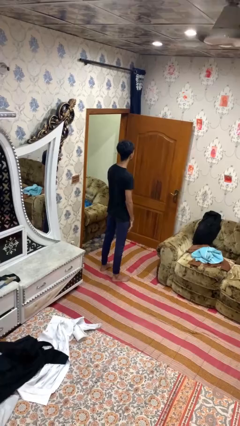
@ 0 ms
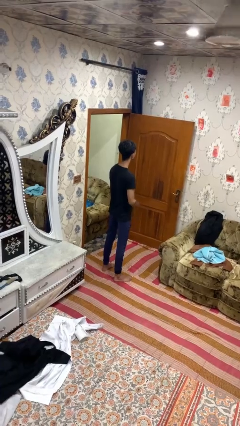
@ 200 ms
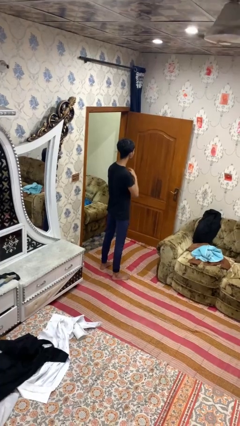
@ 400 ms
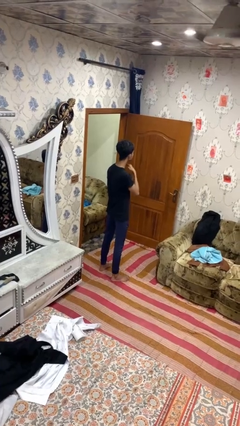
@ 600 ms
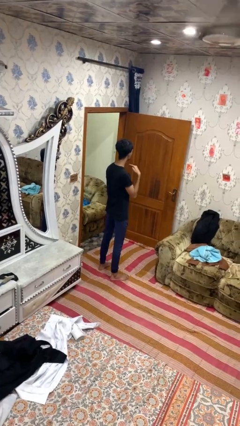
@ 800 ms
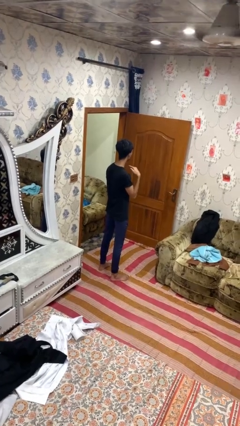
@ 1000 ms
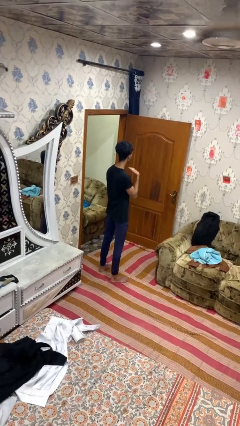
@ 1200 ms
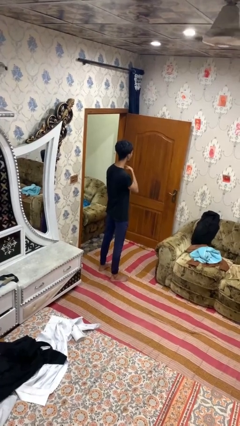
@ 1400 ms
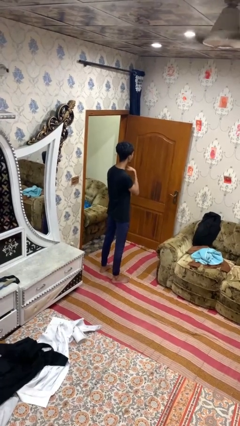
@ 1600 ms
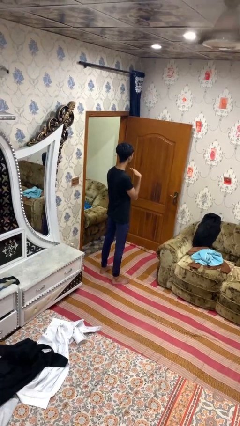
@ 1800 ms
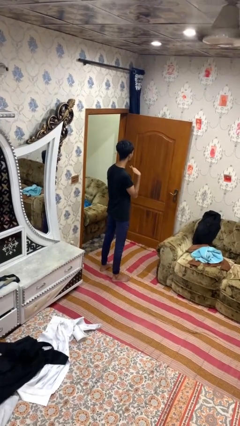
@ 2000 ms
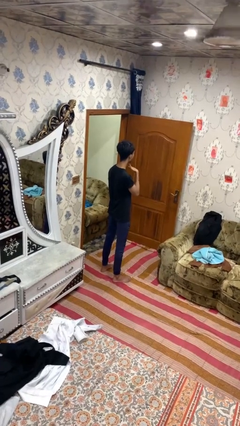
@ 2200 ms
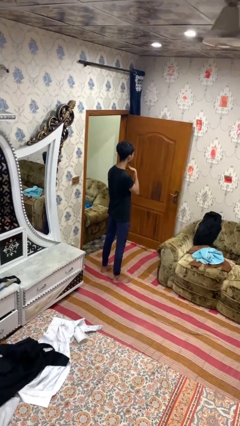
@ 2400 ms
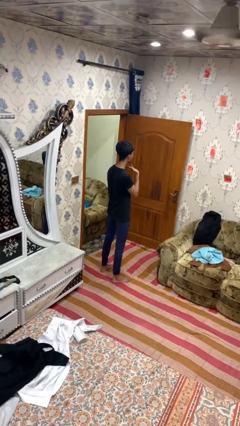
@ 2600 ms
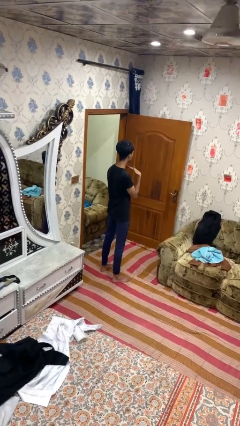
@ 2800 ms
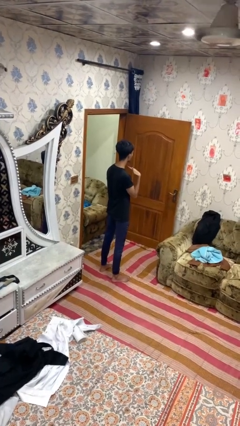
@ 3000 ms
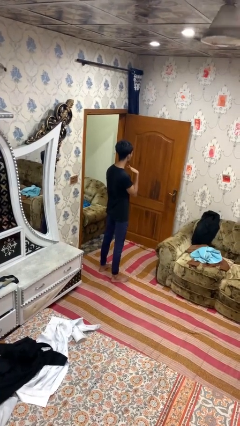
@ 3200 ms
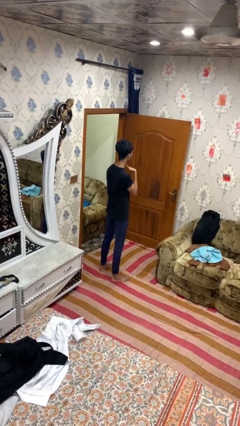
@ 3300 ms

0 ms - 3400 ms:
person gestures cut

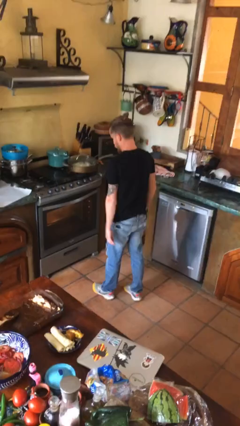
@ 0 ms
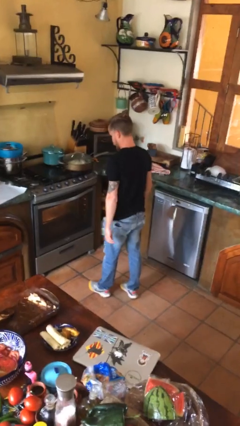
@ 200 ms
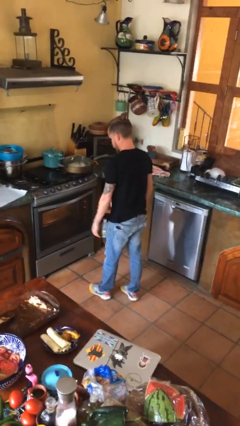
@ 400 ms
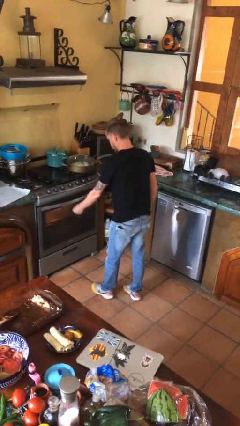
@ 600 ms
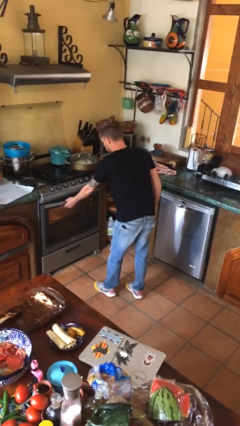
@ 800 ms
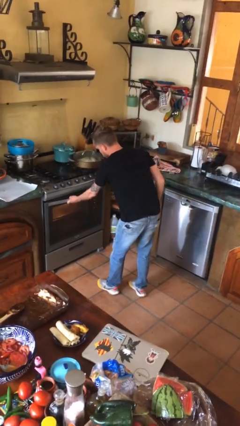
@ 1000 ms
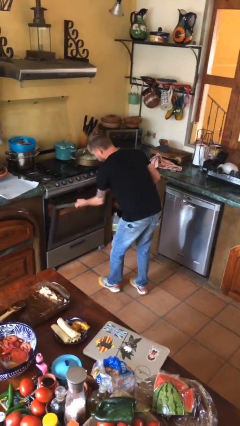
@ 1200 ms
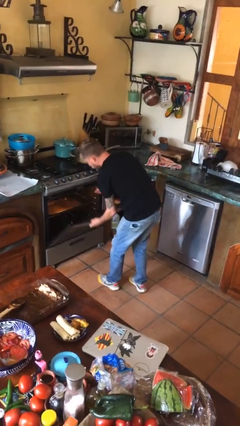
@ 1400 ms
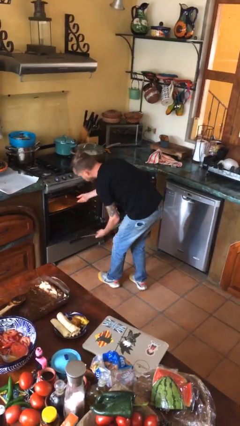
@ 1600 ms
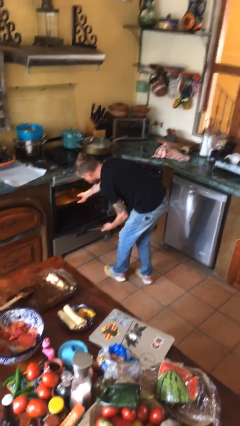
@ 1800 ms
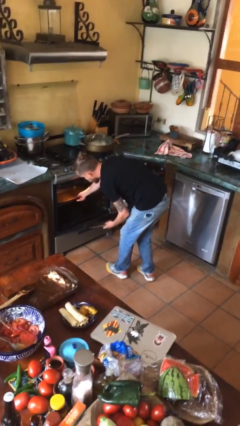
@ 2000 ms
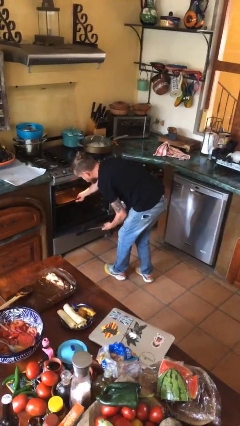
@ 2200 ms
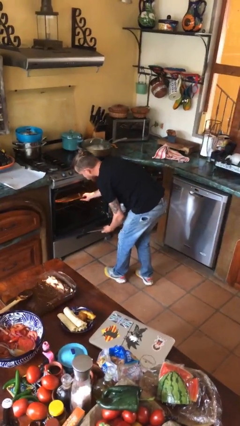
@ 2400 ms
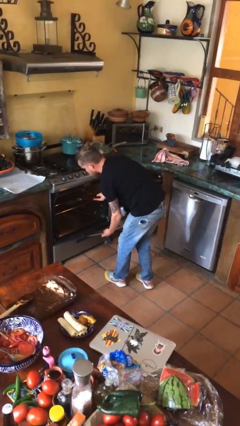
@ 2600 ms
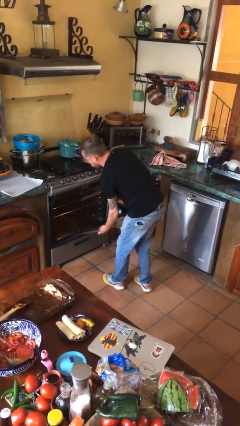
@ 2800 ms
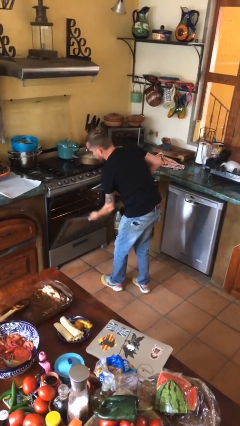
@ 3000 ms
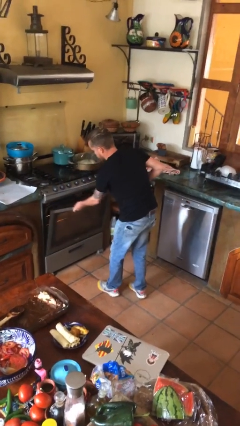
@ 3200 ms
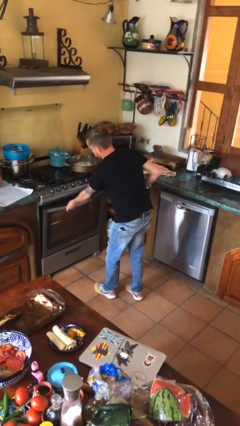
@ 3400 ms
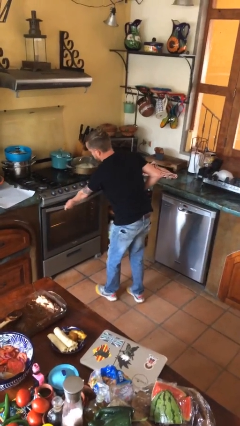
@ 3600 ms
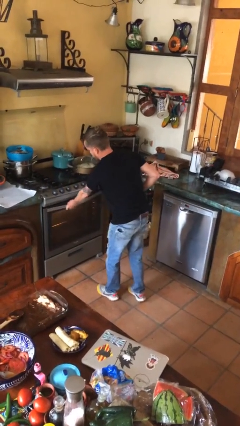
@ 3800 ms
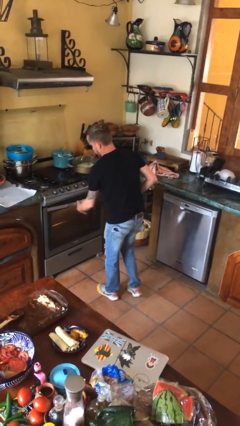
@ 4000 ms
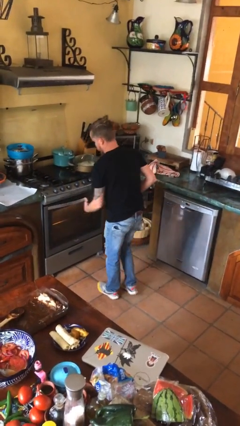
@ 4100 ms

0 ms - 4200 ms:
person takes object from oven

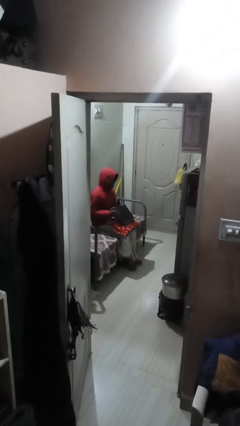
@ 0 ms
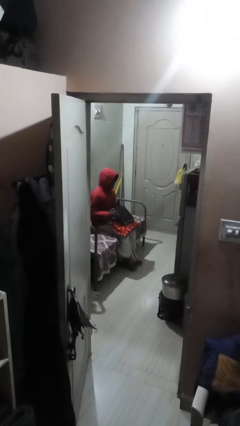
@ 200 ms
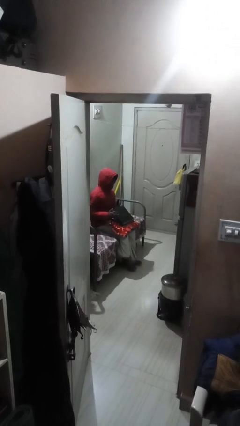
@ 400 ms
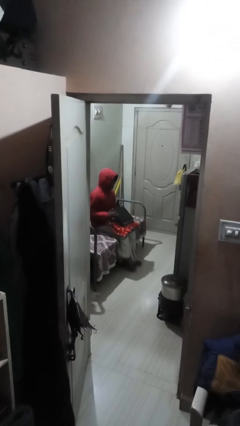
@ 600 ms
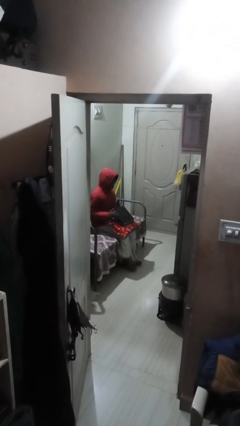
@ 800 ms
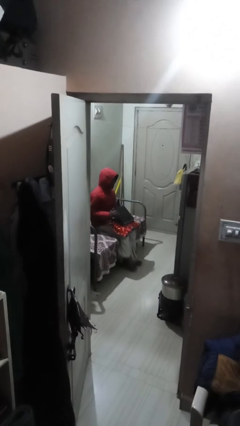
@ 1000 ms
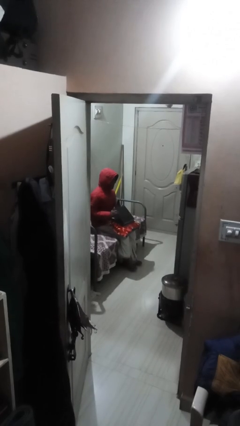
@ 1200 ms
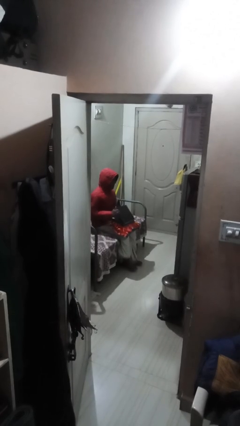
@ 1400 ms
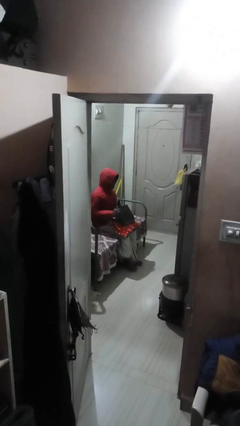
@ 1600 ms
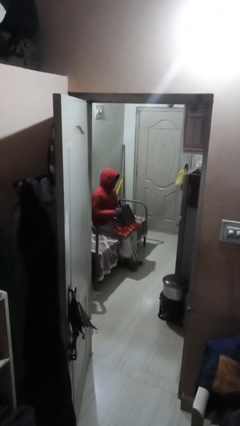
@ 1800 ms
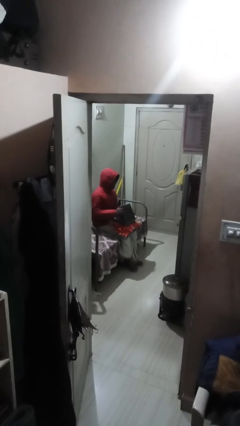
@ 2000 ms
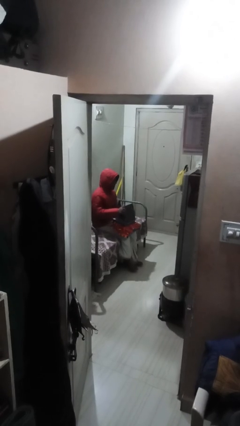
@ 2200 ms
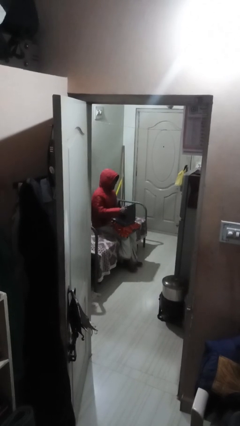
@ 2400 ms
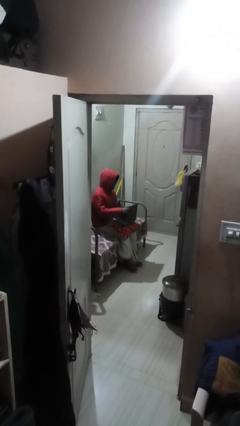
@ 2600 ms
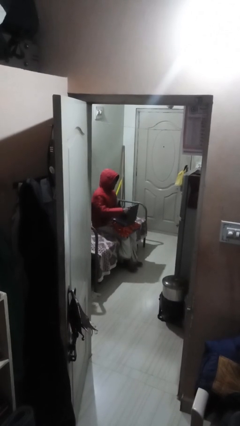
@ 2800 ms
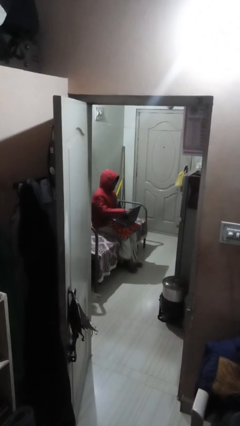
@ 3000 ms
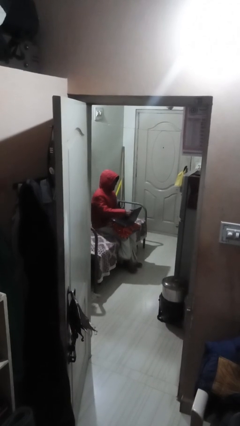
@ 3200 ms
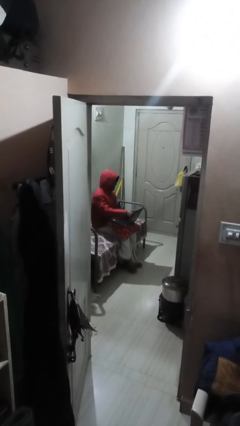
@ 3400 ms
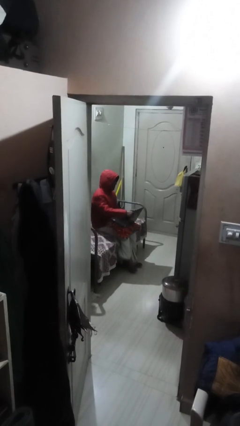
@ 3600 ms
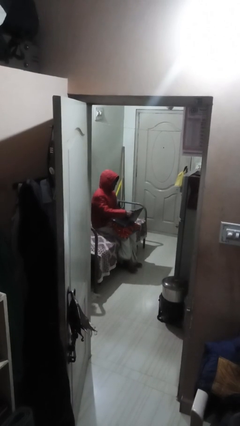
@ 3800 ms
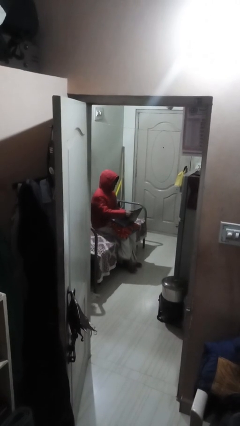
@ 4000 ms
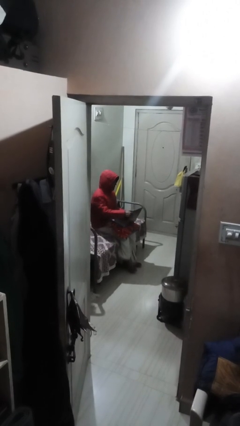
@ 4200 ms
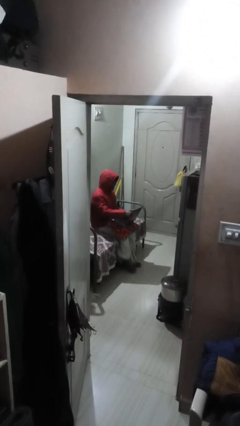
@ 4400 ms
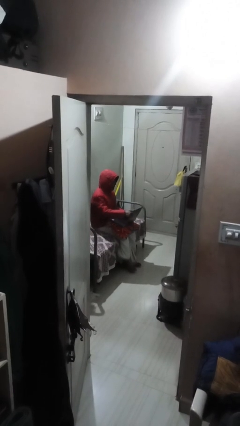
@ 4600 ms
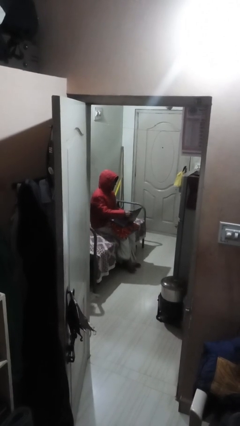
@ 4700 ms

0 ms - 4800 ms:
person interacts with laptop

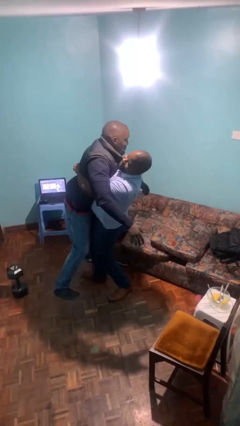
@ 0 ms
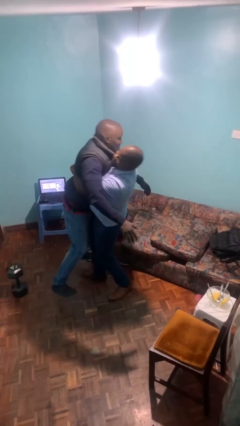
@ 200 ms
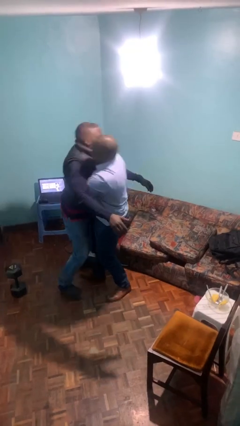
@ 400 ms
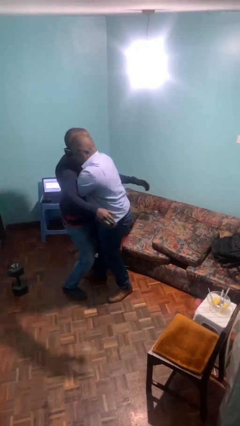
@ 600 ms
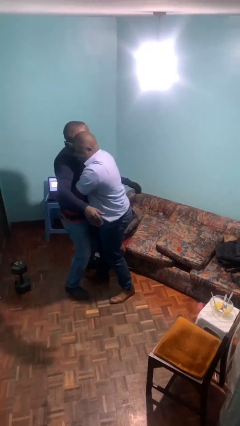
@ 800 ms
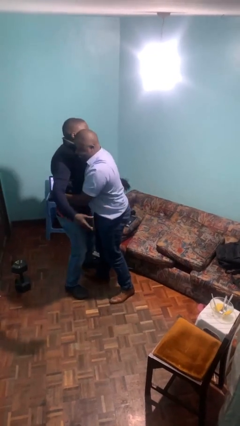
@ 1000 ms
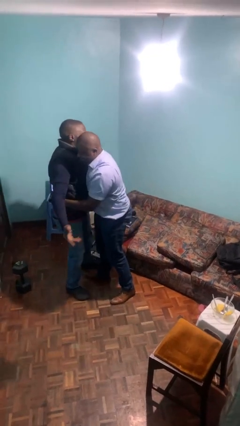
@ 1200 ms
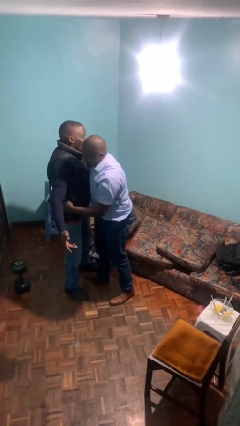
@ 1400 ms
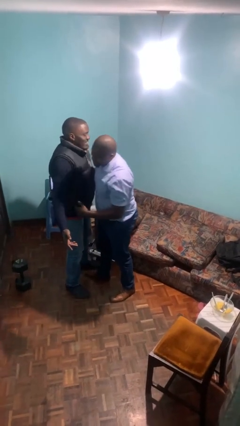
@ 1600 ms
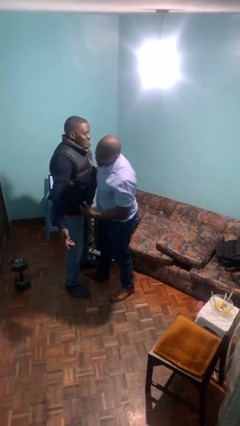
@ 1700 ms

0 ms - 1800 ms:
person puts down person

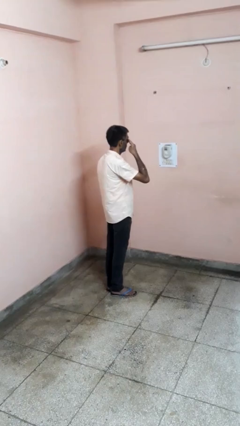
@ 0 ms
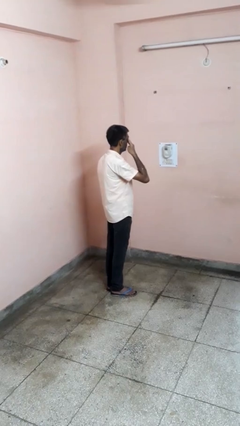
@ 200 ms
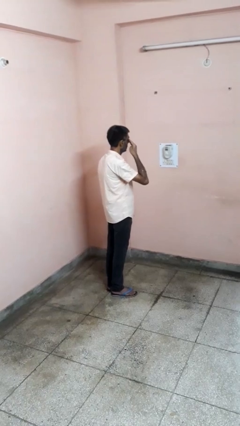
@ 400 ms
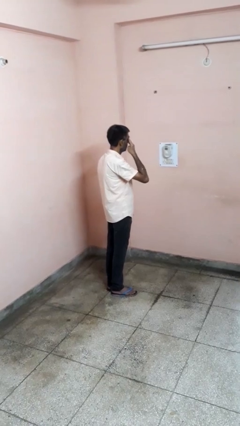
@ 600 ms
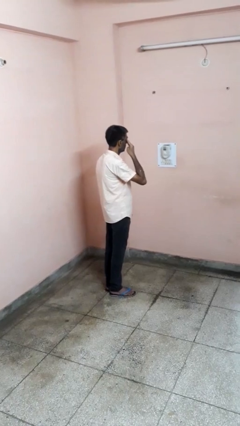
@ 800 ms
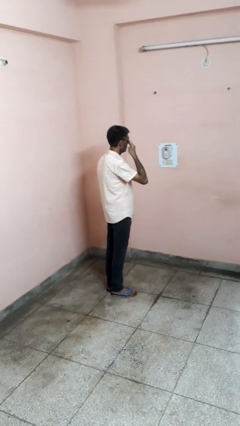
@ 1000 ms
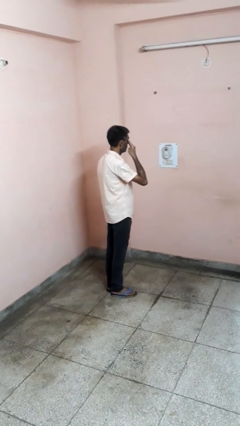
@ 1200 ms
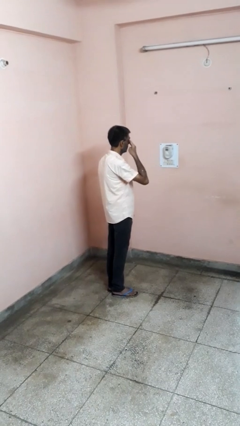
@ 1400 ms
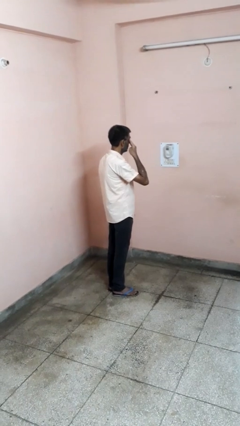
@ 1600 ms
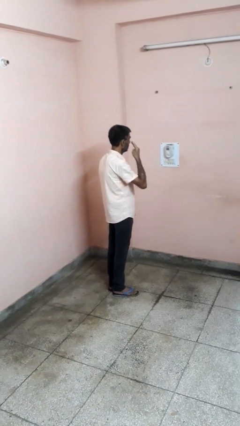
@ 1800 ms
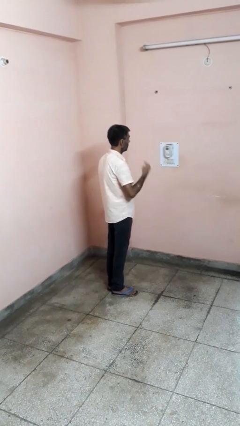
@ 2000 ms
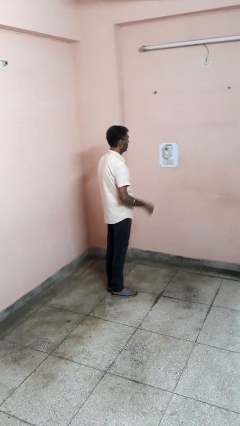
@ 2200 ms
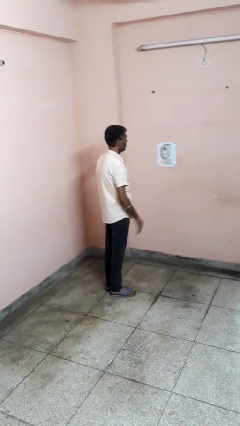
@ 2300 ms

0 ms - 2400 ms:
person rubs eyes

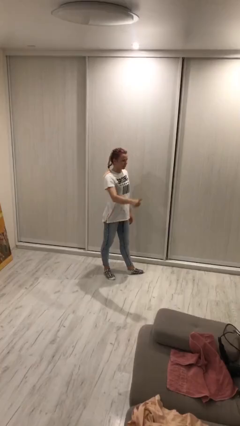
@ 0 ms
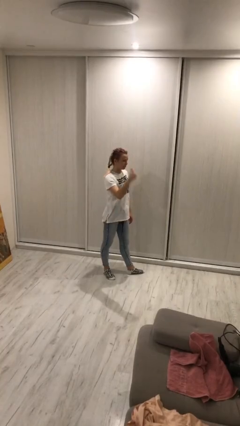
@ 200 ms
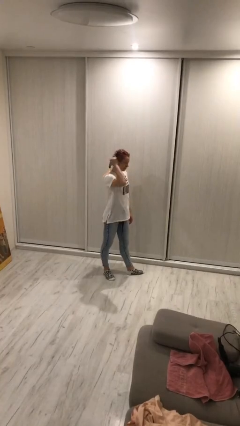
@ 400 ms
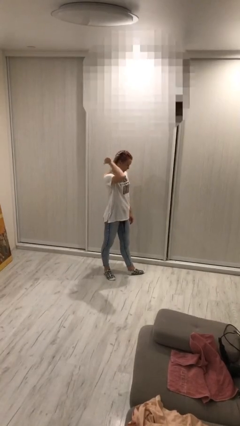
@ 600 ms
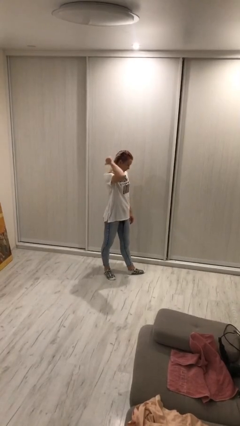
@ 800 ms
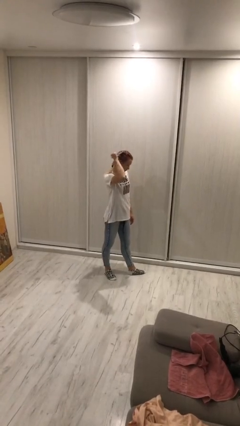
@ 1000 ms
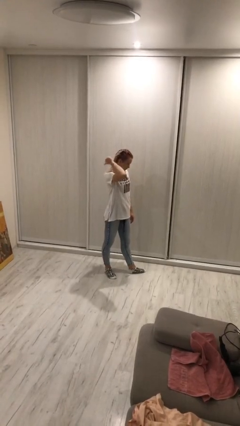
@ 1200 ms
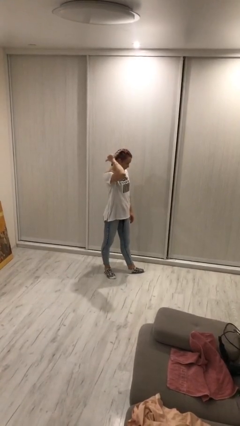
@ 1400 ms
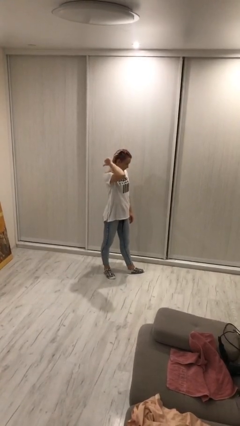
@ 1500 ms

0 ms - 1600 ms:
person gestures behind me
